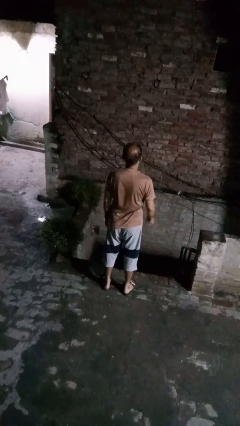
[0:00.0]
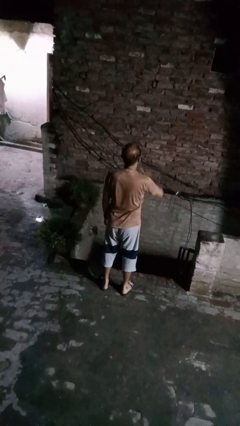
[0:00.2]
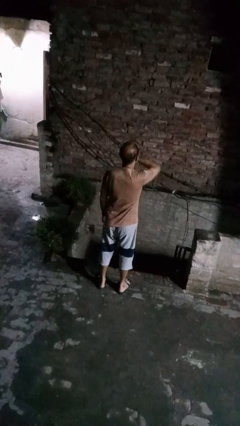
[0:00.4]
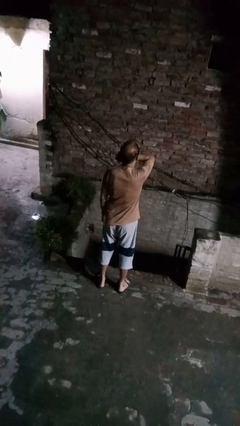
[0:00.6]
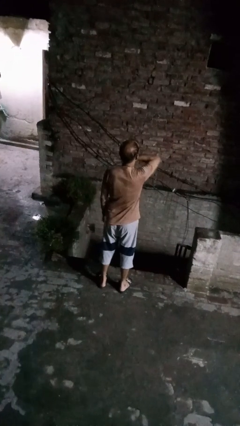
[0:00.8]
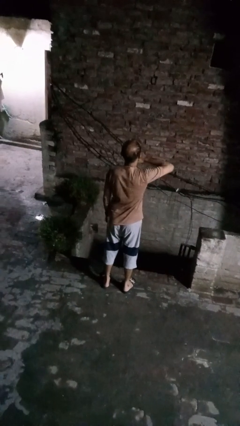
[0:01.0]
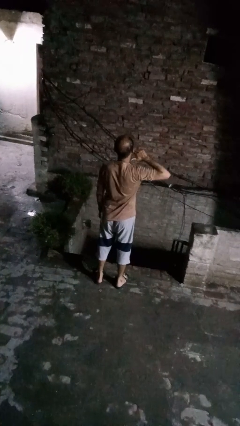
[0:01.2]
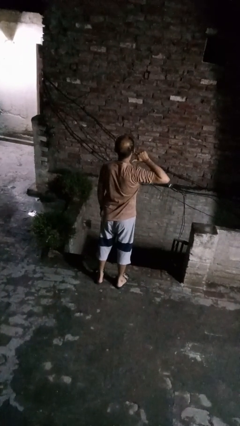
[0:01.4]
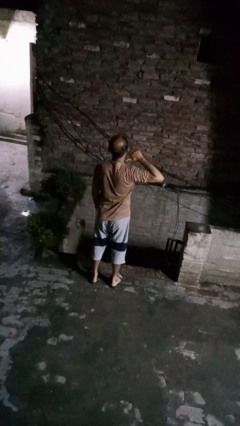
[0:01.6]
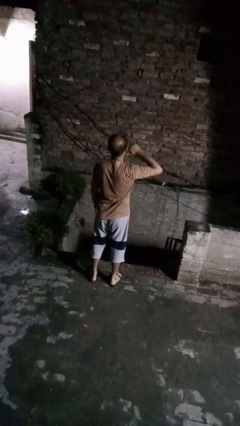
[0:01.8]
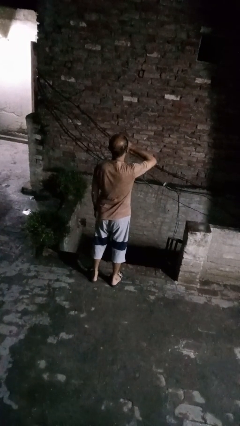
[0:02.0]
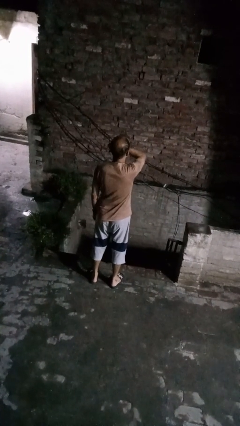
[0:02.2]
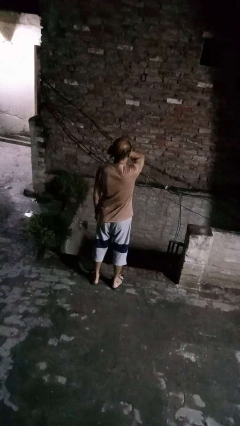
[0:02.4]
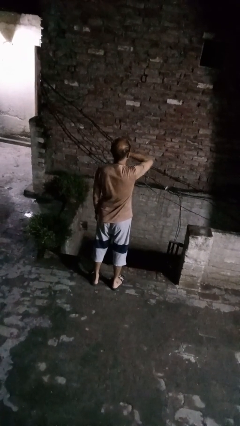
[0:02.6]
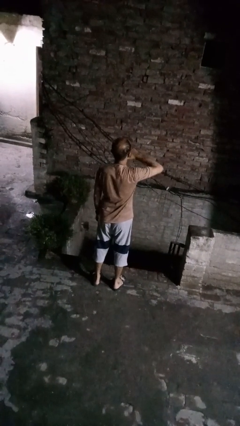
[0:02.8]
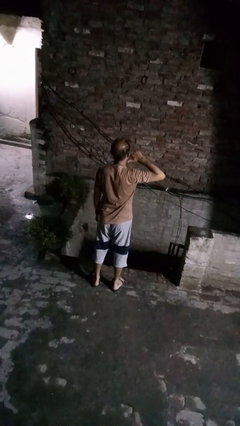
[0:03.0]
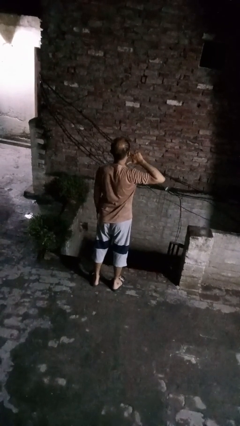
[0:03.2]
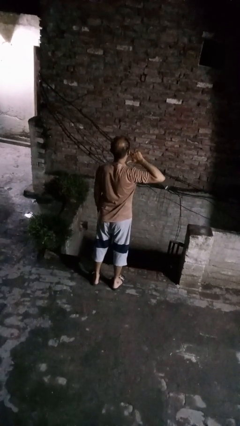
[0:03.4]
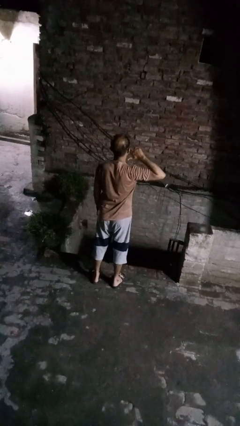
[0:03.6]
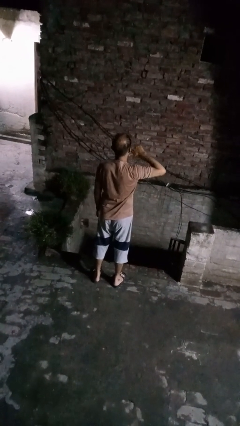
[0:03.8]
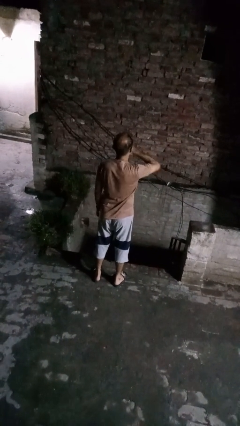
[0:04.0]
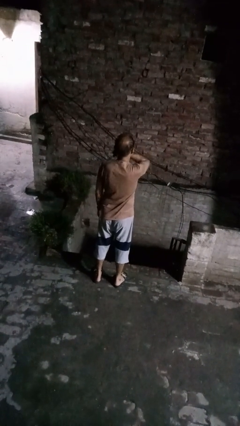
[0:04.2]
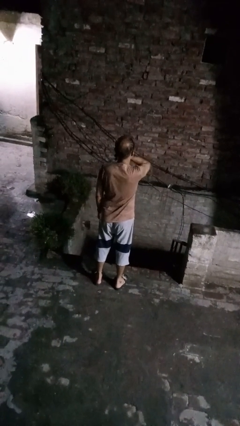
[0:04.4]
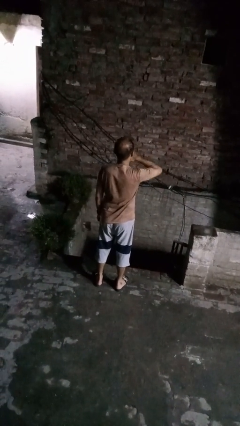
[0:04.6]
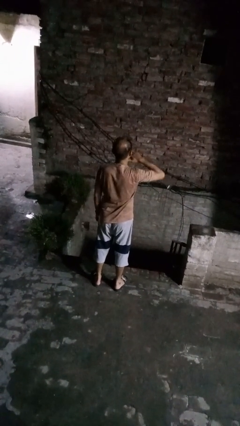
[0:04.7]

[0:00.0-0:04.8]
person gestures cut

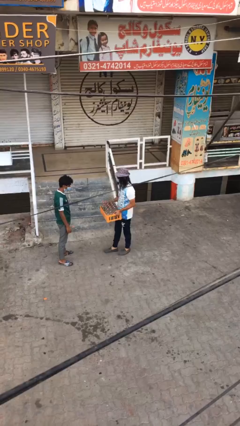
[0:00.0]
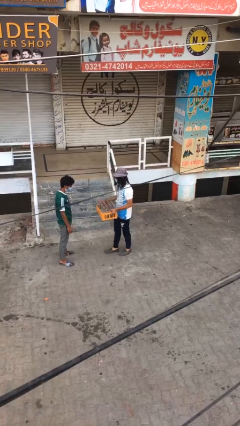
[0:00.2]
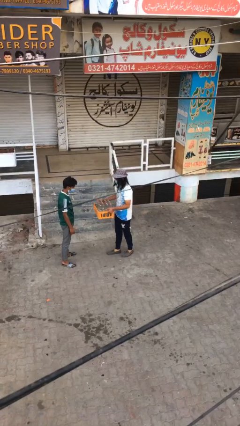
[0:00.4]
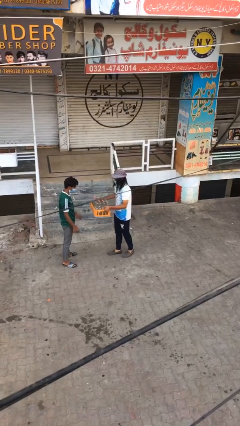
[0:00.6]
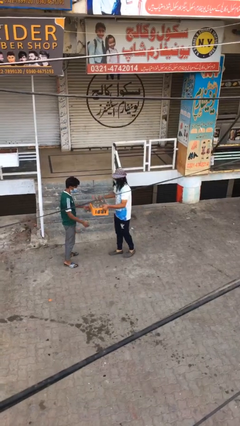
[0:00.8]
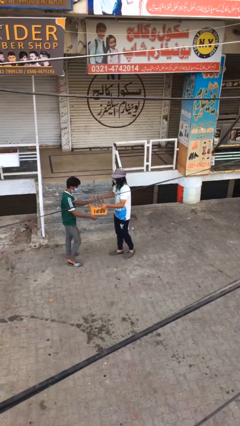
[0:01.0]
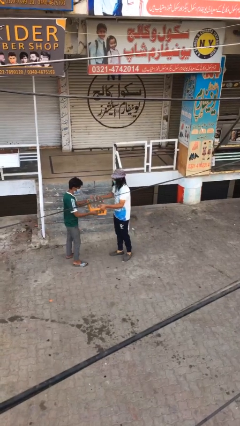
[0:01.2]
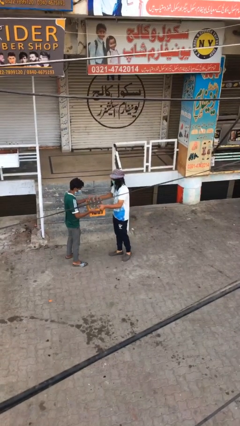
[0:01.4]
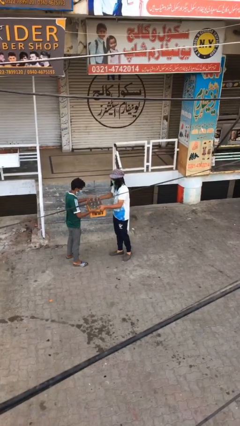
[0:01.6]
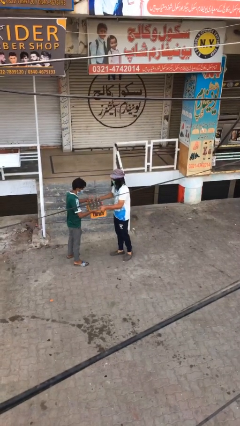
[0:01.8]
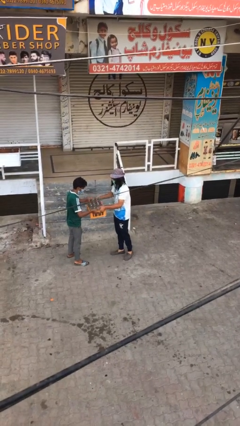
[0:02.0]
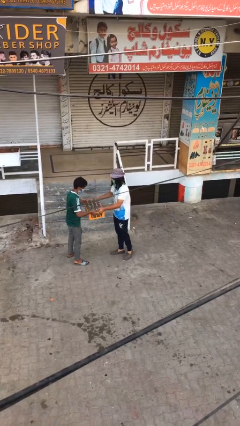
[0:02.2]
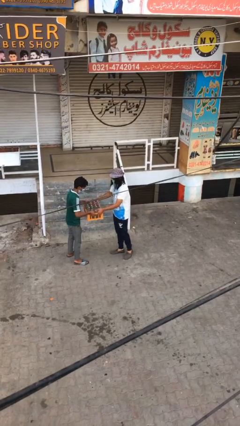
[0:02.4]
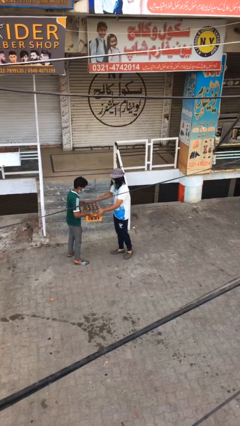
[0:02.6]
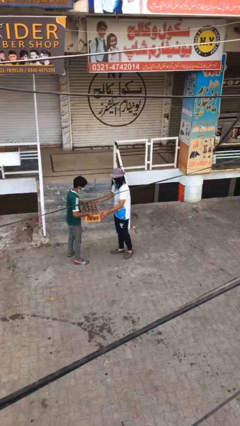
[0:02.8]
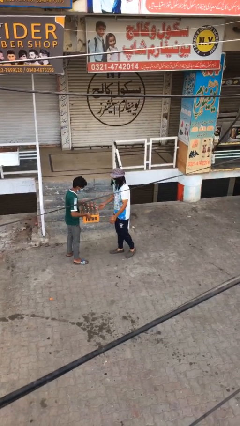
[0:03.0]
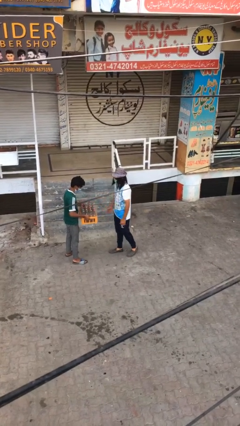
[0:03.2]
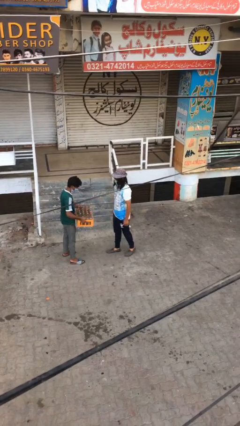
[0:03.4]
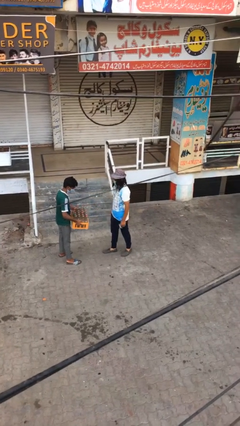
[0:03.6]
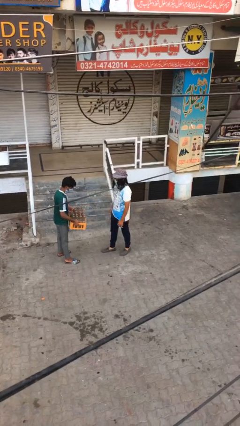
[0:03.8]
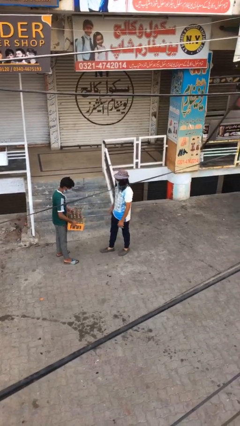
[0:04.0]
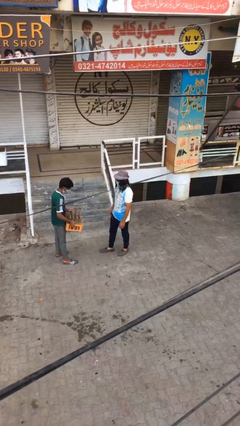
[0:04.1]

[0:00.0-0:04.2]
person transfers object to person

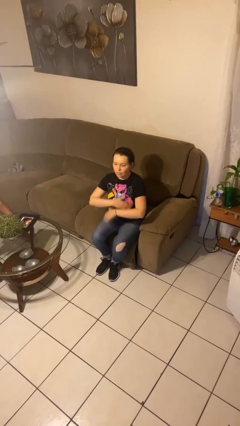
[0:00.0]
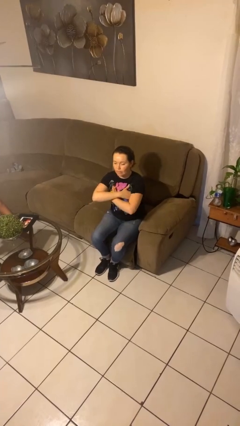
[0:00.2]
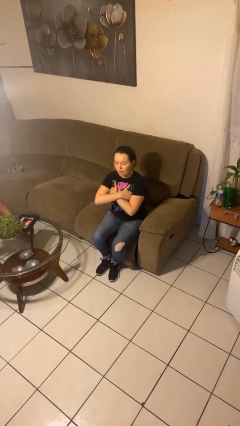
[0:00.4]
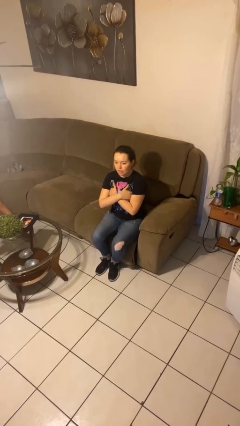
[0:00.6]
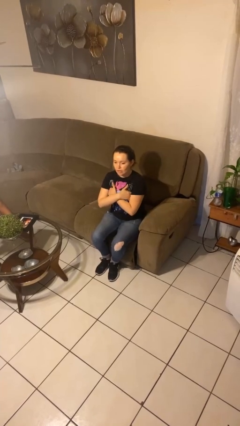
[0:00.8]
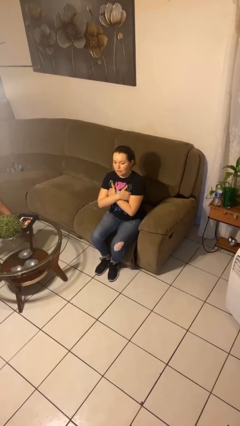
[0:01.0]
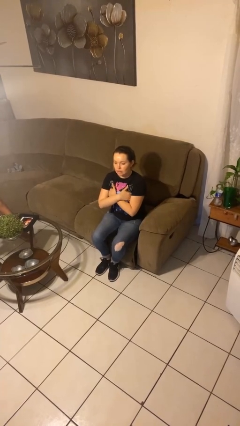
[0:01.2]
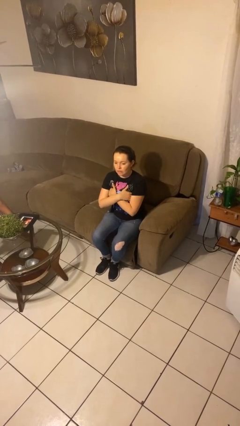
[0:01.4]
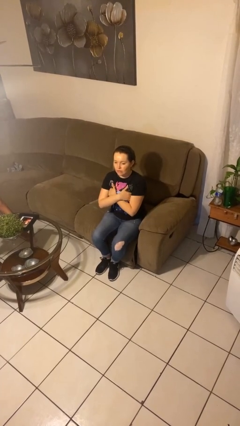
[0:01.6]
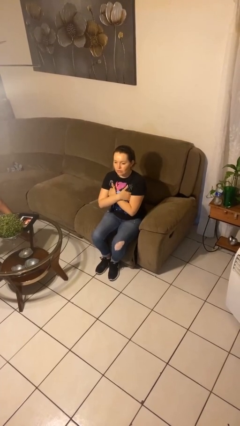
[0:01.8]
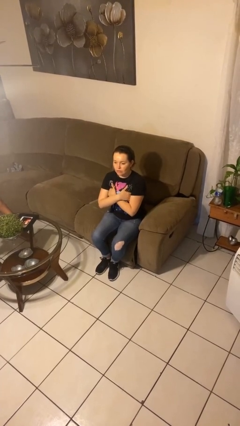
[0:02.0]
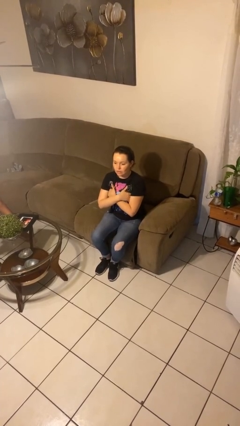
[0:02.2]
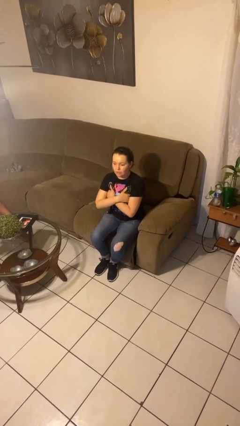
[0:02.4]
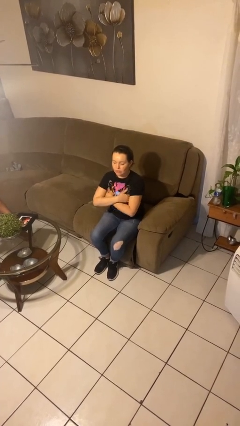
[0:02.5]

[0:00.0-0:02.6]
person gestures arms x

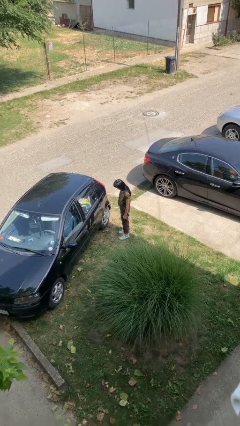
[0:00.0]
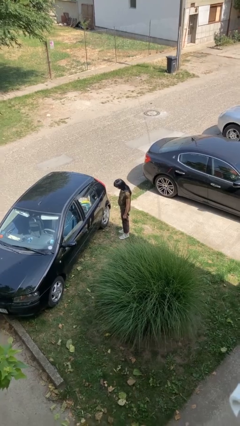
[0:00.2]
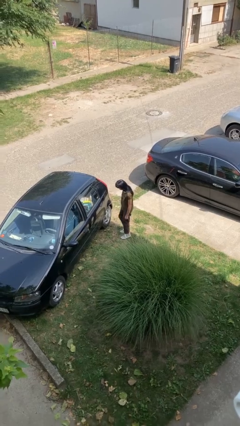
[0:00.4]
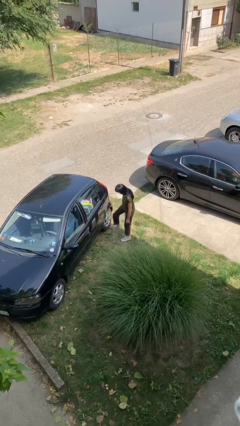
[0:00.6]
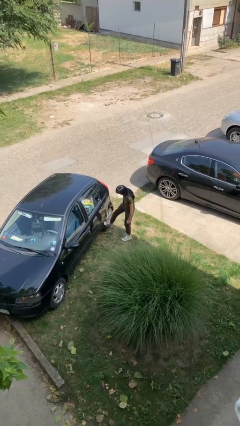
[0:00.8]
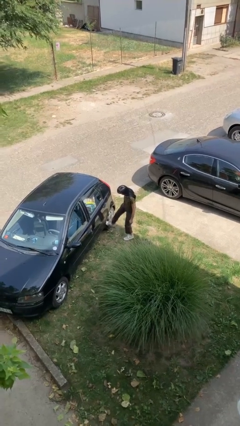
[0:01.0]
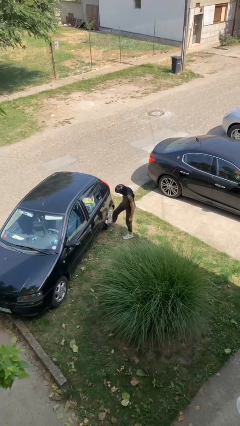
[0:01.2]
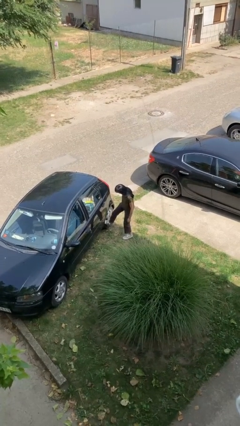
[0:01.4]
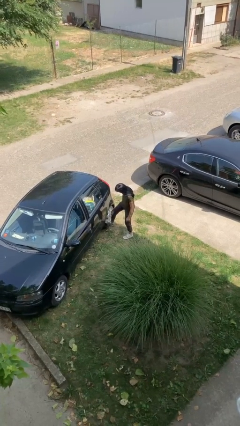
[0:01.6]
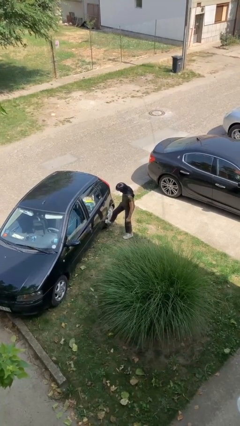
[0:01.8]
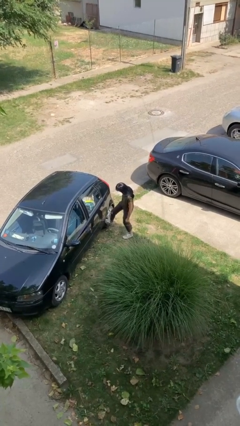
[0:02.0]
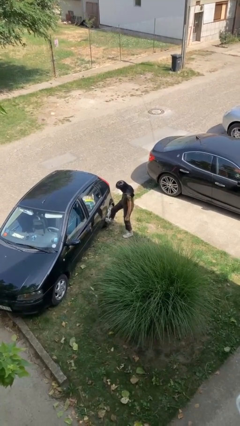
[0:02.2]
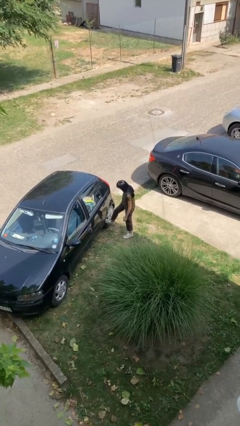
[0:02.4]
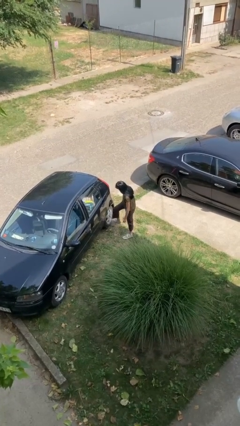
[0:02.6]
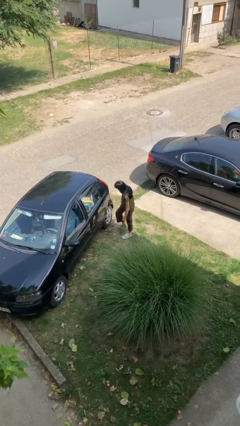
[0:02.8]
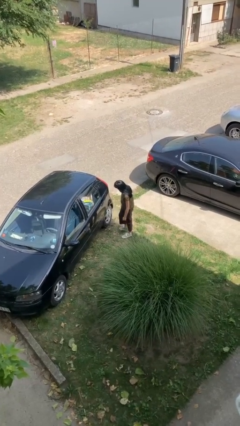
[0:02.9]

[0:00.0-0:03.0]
person kicks car tires

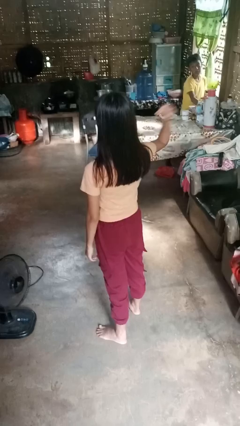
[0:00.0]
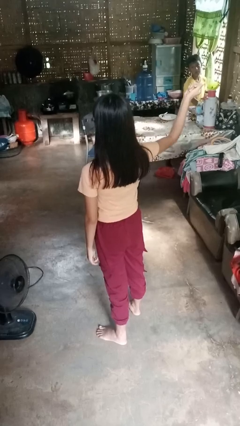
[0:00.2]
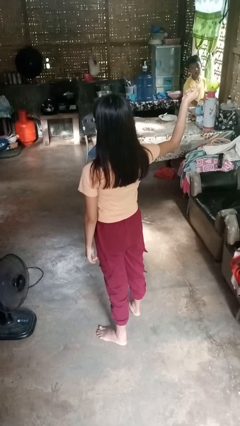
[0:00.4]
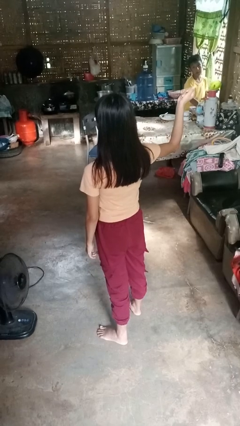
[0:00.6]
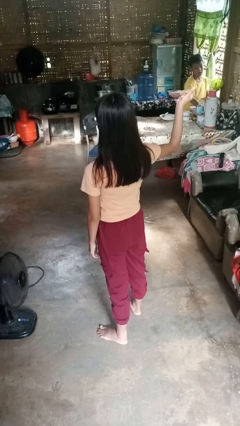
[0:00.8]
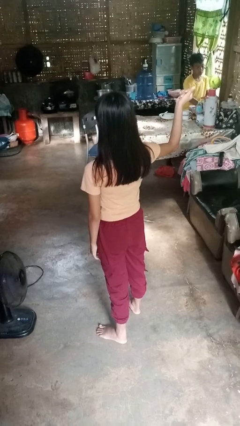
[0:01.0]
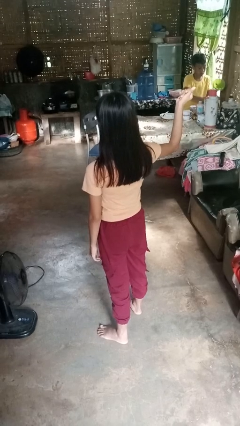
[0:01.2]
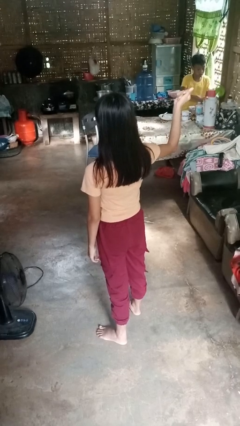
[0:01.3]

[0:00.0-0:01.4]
person snaps fingers

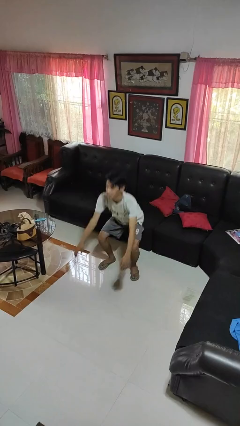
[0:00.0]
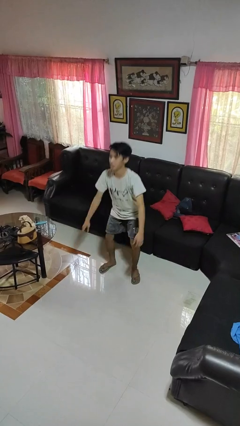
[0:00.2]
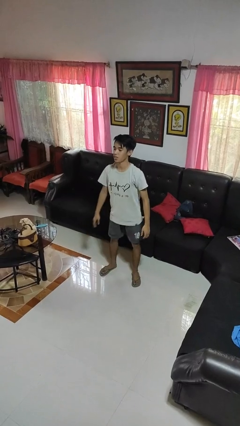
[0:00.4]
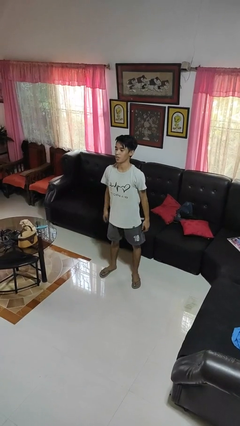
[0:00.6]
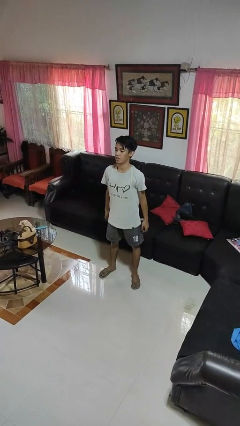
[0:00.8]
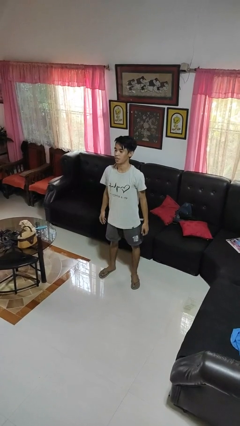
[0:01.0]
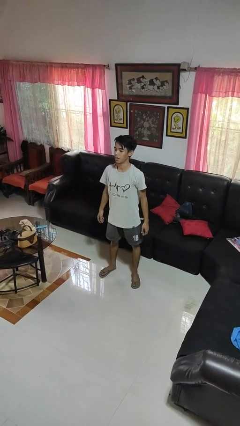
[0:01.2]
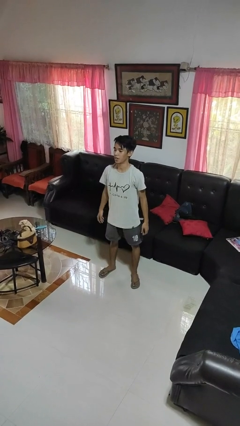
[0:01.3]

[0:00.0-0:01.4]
person stands up
